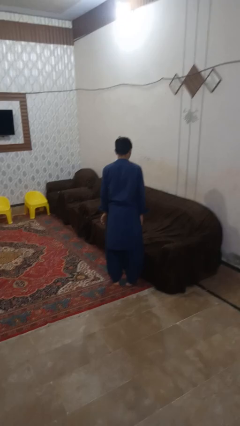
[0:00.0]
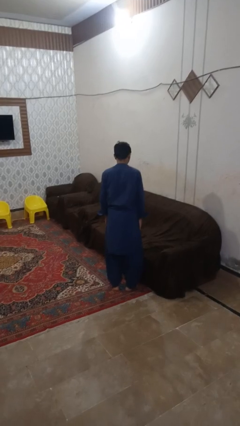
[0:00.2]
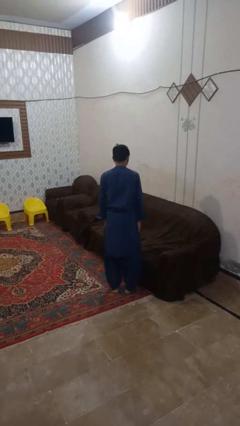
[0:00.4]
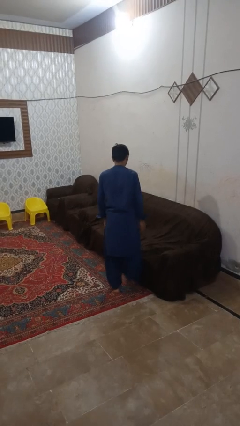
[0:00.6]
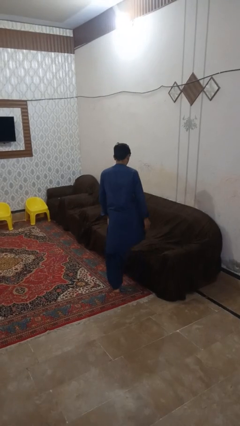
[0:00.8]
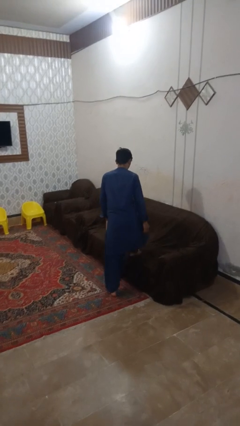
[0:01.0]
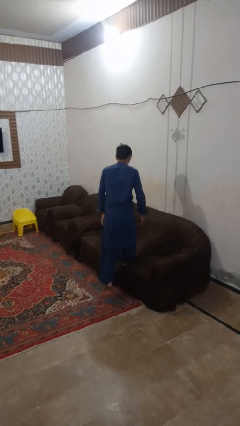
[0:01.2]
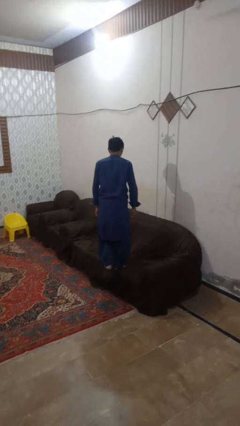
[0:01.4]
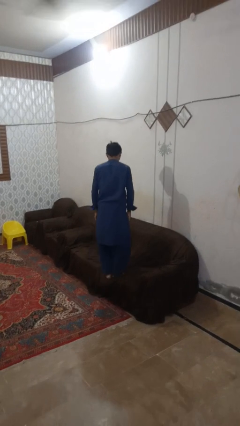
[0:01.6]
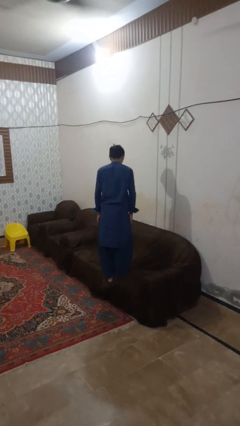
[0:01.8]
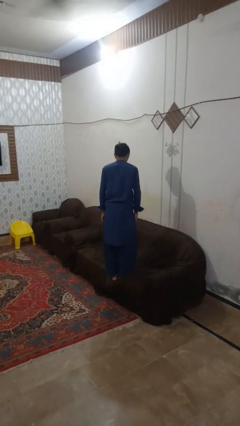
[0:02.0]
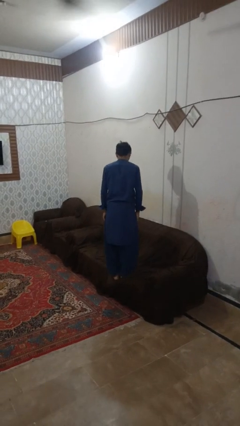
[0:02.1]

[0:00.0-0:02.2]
person climbs on couch

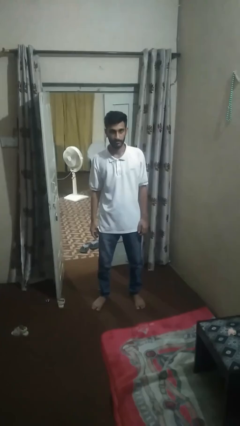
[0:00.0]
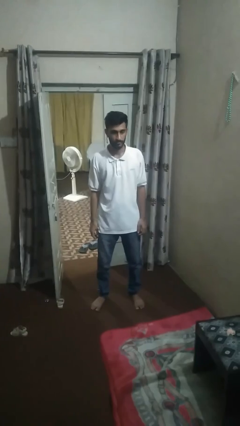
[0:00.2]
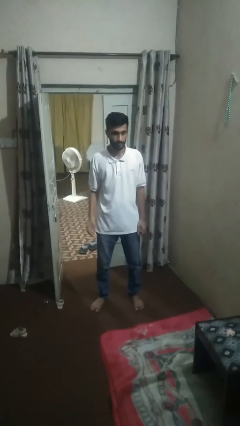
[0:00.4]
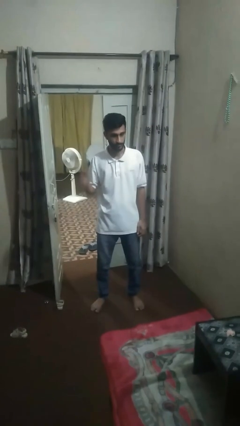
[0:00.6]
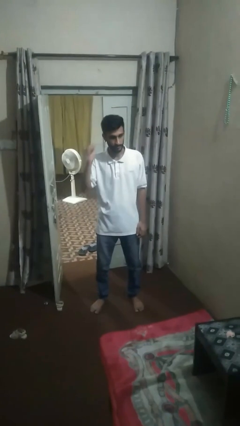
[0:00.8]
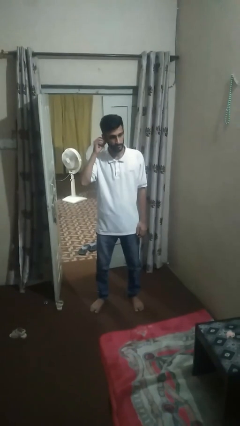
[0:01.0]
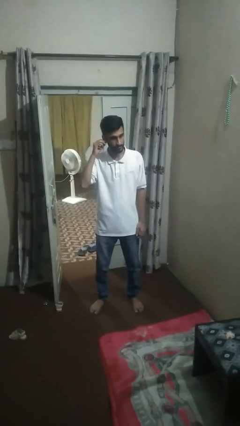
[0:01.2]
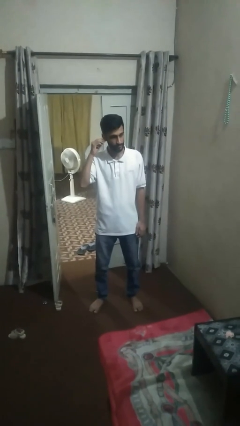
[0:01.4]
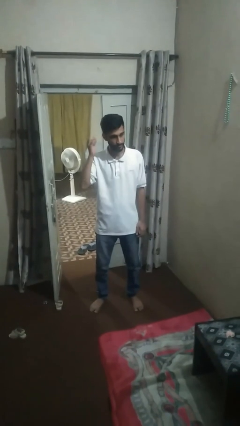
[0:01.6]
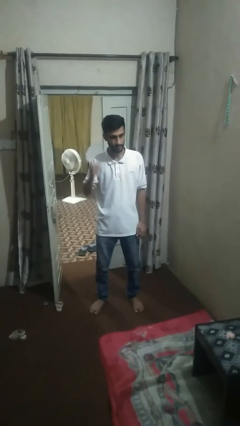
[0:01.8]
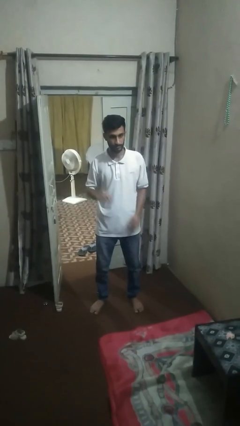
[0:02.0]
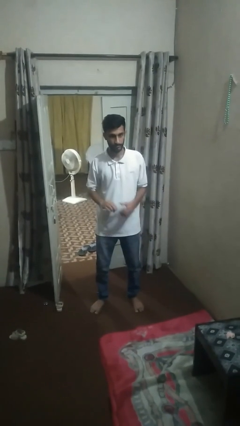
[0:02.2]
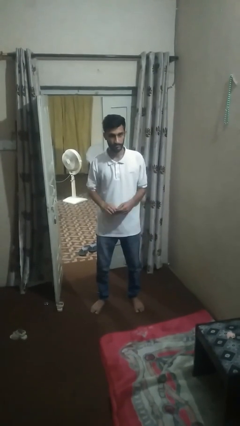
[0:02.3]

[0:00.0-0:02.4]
person takes off earrings

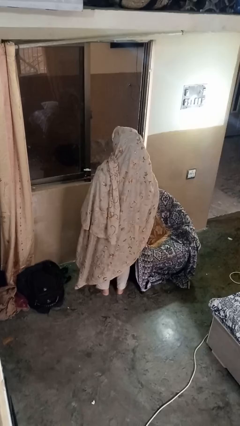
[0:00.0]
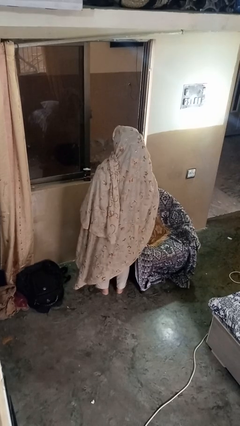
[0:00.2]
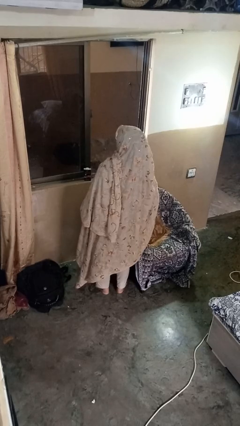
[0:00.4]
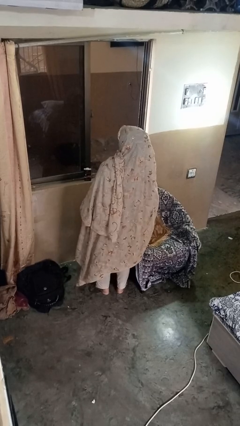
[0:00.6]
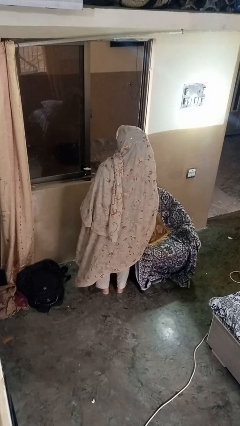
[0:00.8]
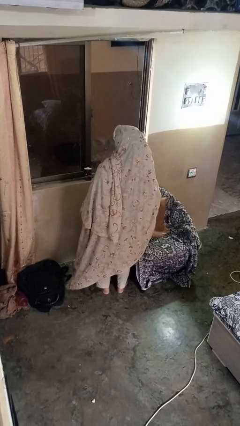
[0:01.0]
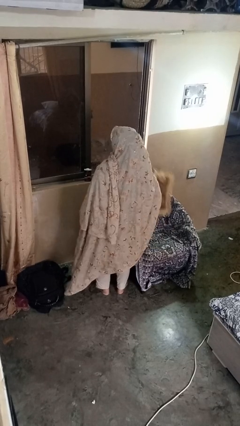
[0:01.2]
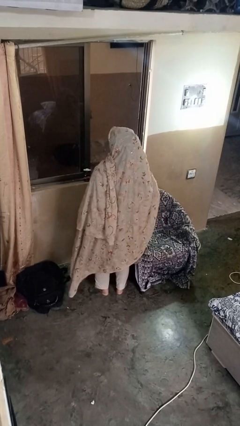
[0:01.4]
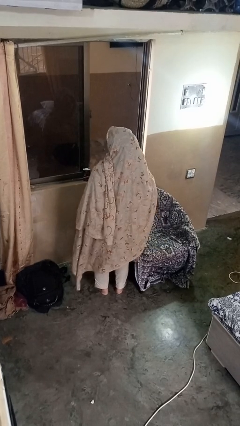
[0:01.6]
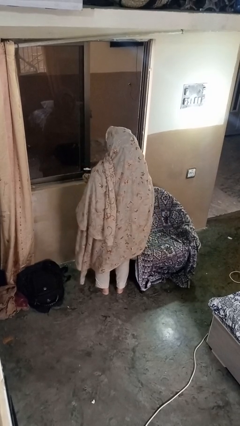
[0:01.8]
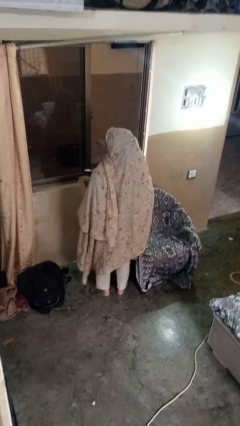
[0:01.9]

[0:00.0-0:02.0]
person picks up object from couch

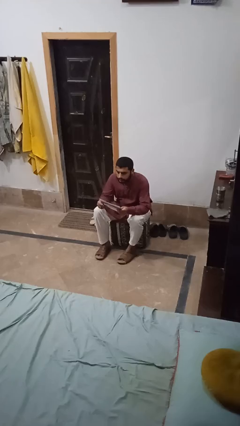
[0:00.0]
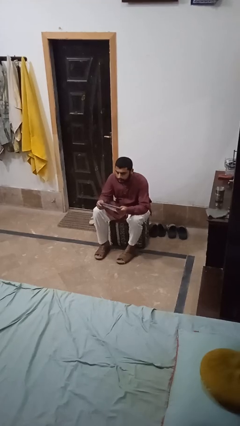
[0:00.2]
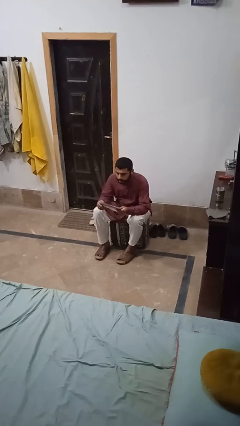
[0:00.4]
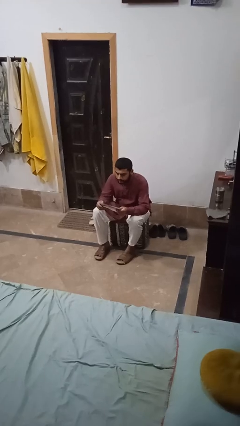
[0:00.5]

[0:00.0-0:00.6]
person reads magazine

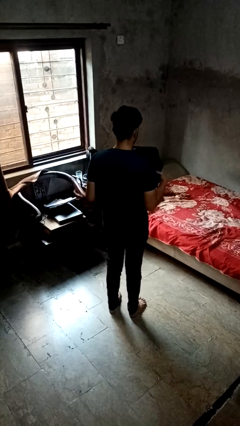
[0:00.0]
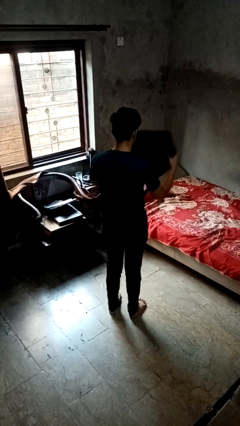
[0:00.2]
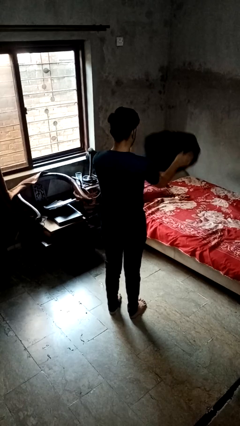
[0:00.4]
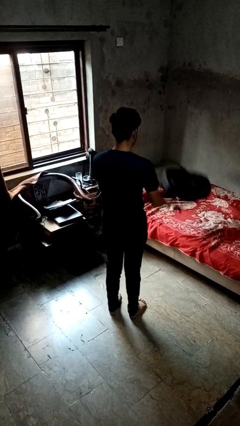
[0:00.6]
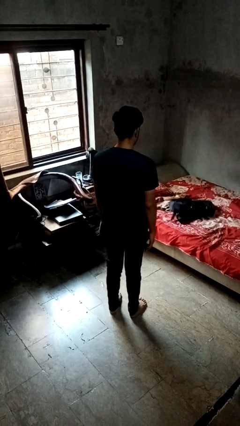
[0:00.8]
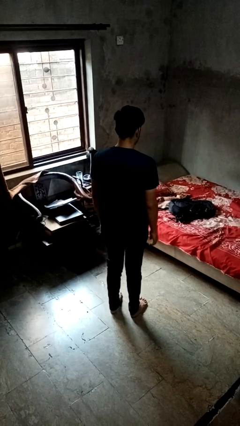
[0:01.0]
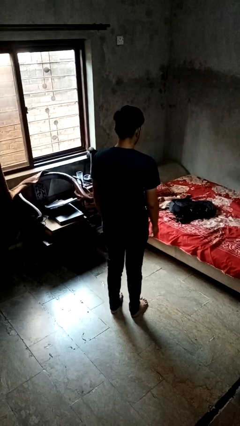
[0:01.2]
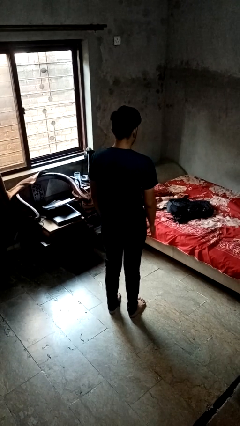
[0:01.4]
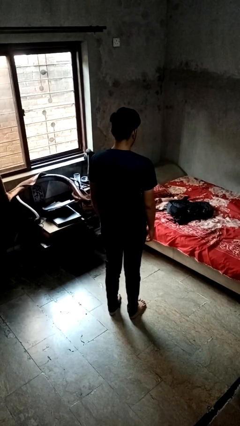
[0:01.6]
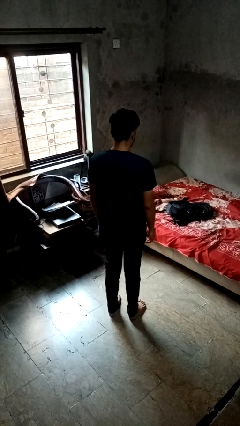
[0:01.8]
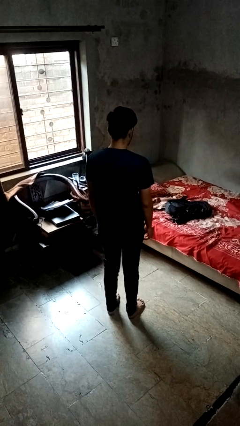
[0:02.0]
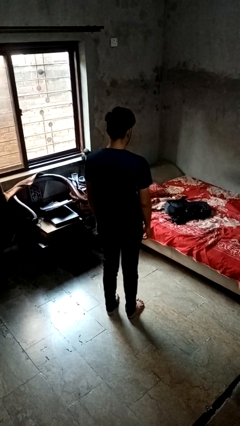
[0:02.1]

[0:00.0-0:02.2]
person throws object on bed

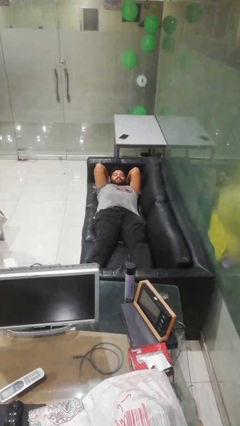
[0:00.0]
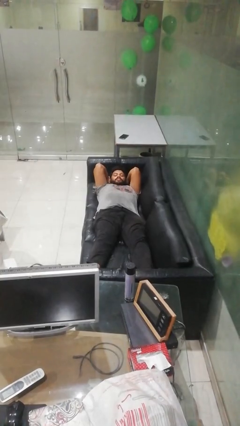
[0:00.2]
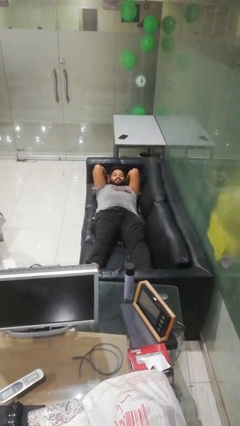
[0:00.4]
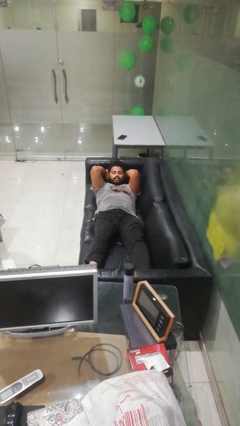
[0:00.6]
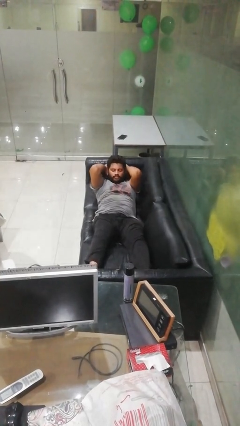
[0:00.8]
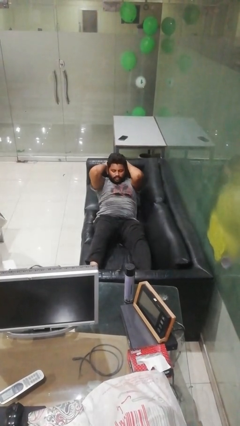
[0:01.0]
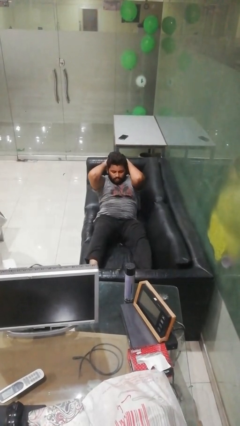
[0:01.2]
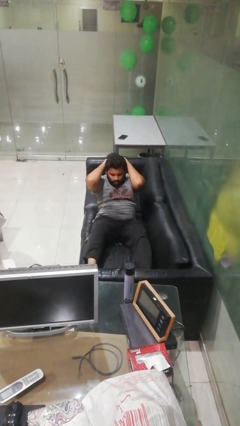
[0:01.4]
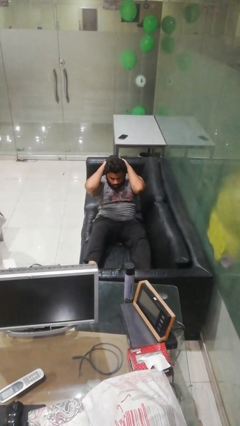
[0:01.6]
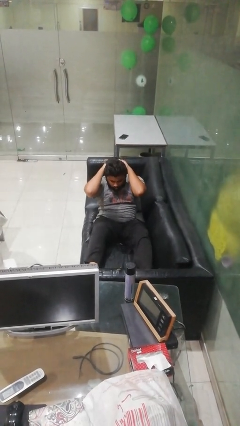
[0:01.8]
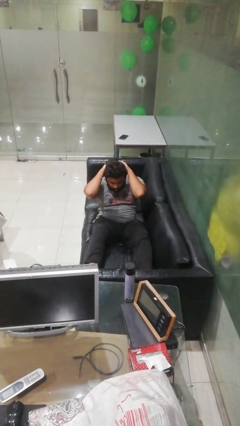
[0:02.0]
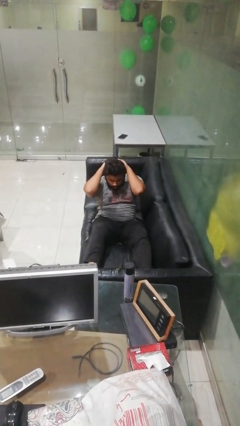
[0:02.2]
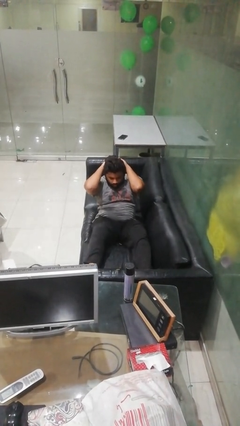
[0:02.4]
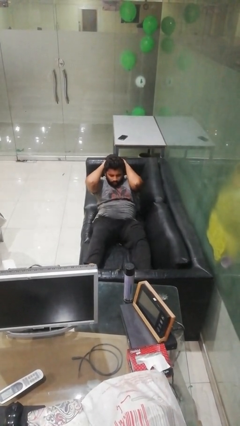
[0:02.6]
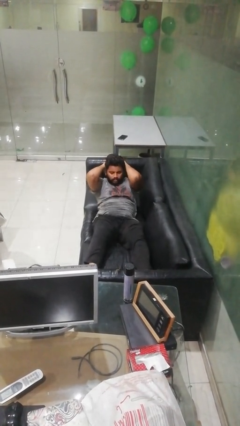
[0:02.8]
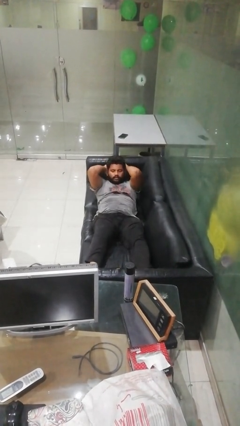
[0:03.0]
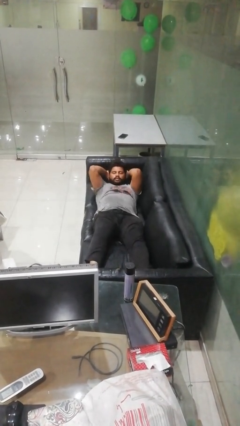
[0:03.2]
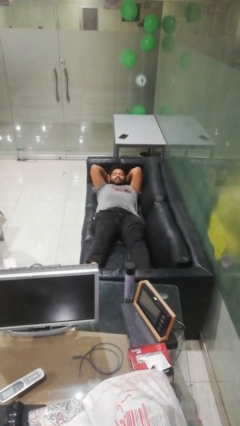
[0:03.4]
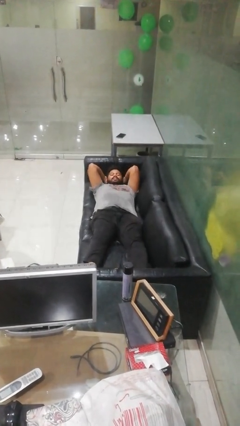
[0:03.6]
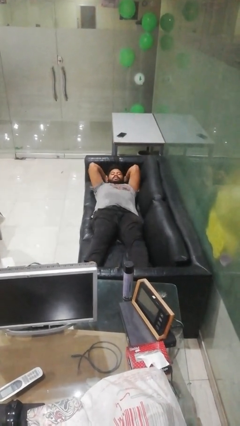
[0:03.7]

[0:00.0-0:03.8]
person exercises with situp

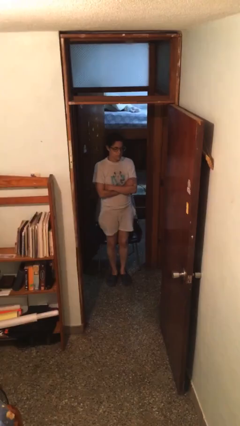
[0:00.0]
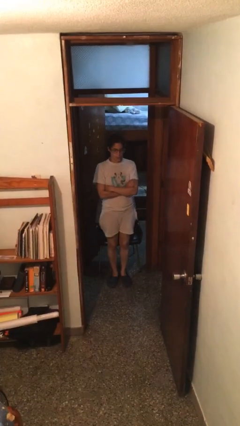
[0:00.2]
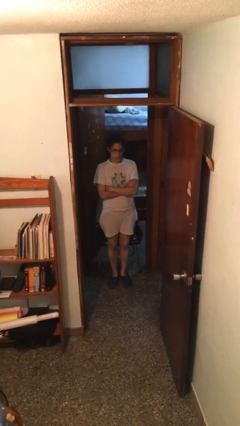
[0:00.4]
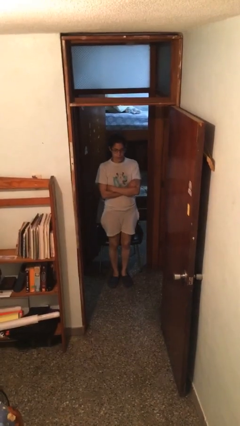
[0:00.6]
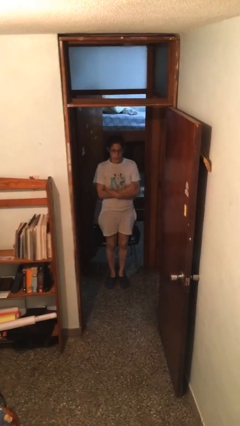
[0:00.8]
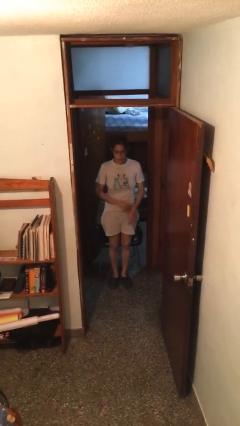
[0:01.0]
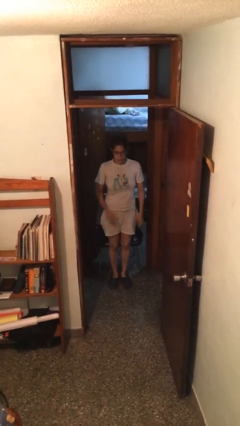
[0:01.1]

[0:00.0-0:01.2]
person stands up

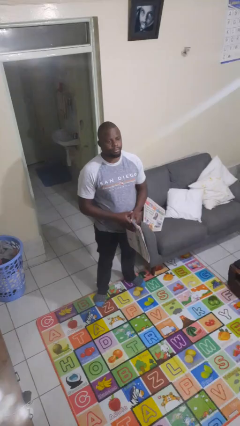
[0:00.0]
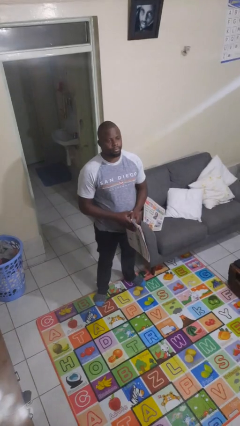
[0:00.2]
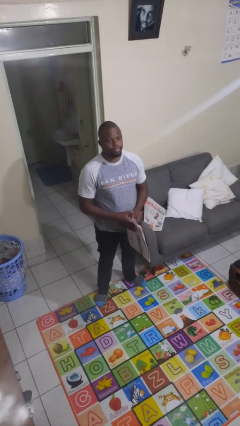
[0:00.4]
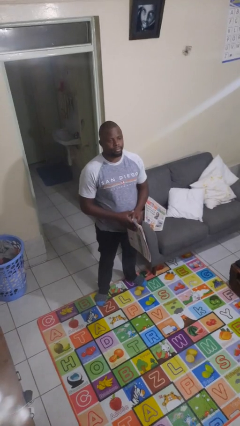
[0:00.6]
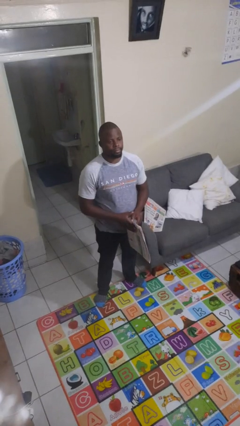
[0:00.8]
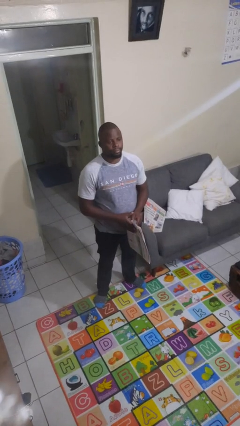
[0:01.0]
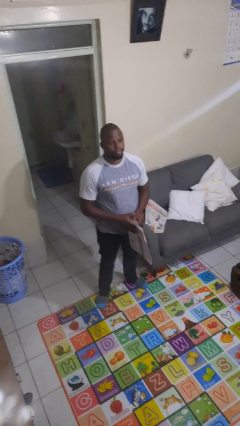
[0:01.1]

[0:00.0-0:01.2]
person reads newspaper

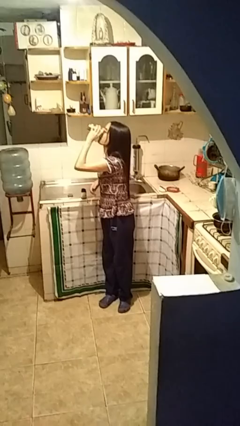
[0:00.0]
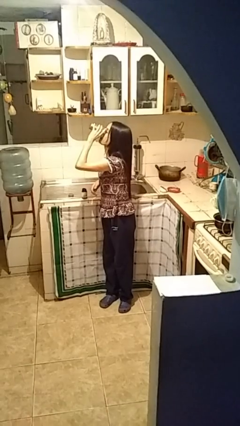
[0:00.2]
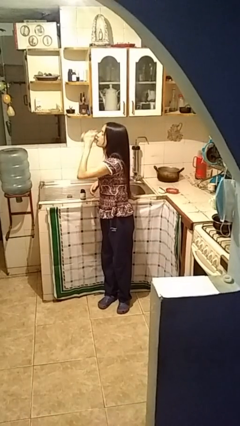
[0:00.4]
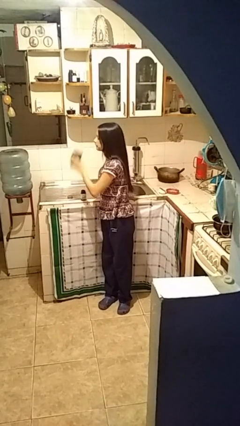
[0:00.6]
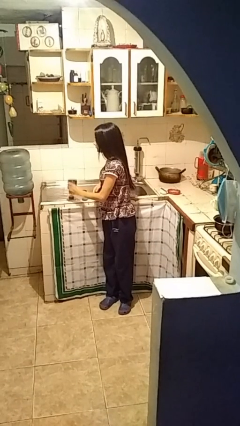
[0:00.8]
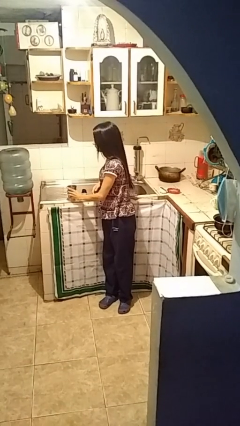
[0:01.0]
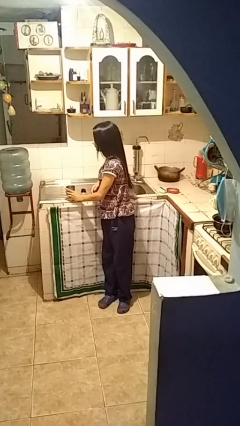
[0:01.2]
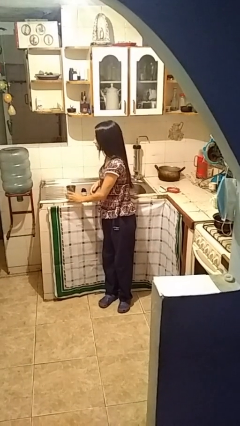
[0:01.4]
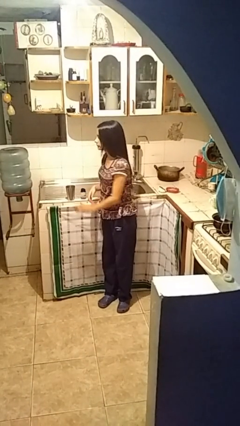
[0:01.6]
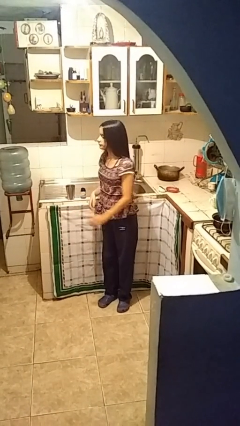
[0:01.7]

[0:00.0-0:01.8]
person drinks from cup
